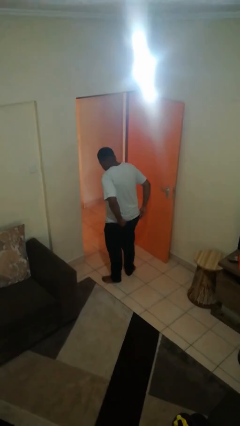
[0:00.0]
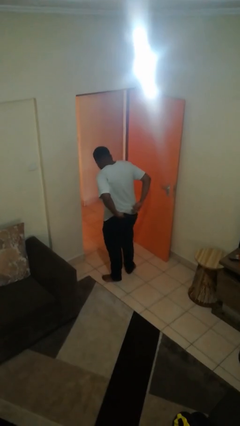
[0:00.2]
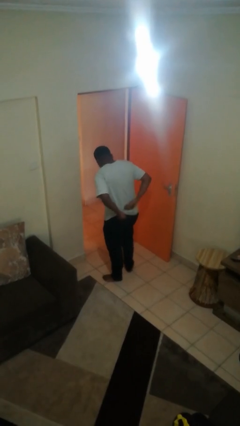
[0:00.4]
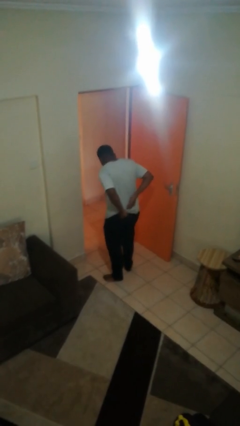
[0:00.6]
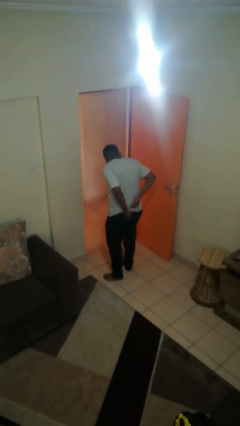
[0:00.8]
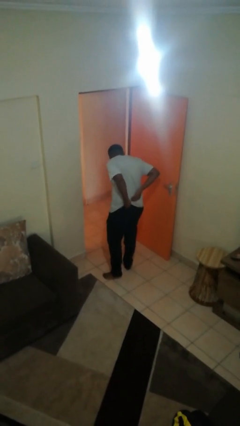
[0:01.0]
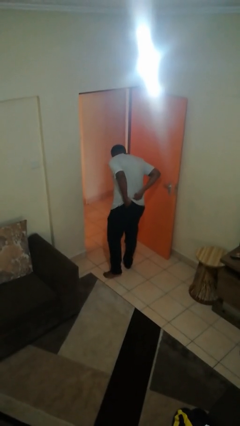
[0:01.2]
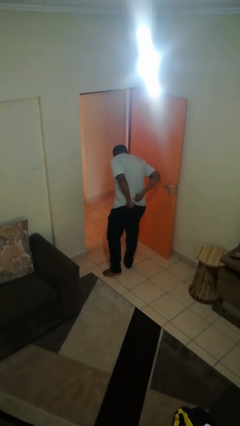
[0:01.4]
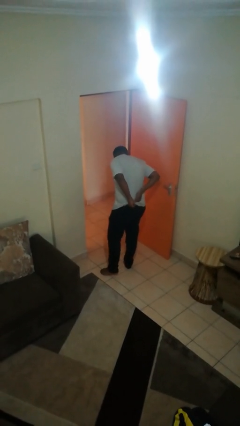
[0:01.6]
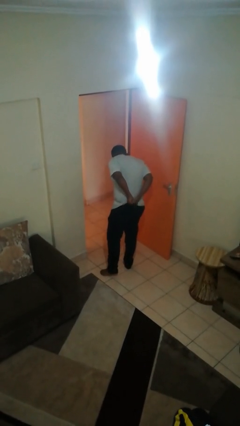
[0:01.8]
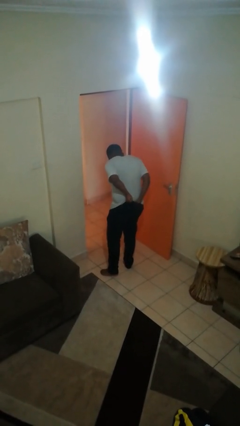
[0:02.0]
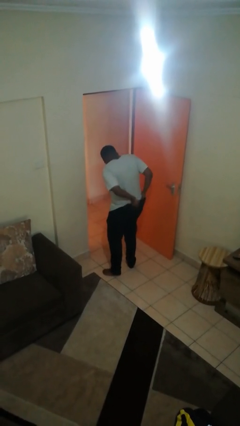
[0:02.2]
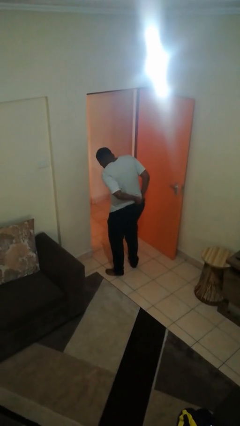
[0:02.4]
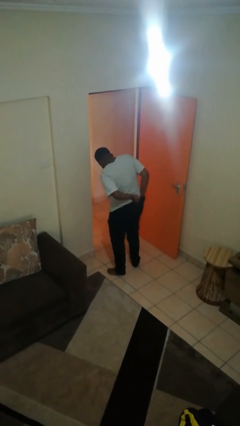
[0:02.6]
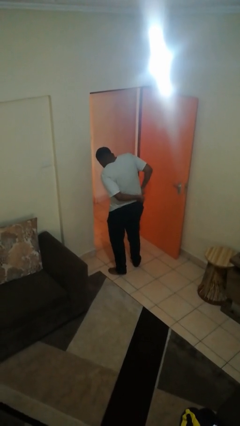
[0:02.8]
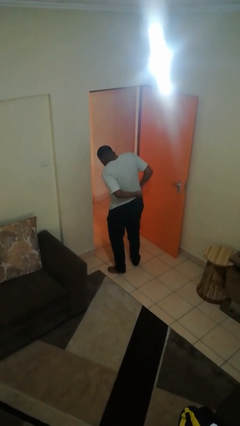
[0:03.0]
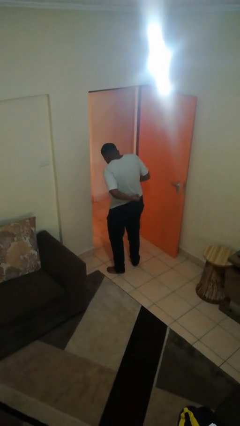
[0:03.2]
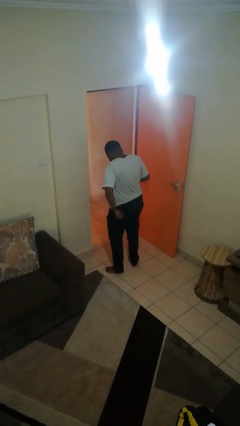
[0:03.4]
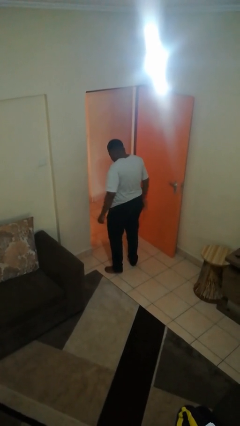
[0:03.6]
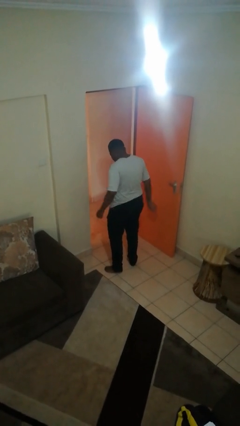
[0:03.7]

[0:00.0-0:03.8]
person tucks in shirt

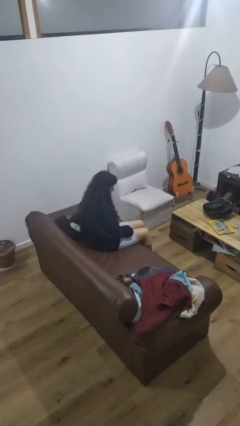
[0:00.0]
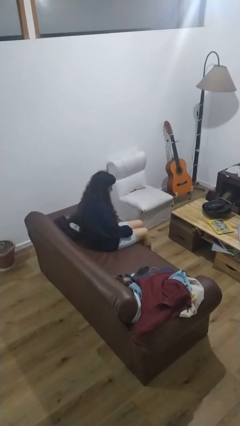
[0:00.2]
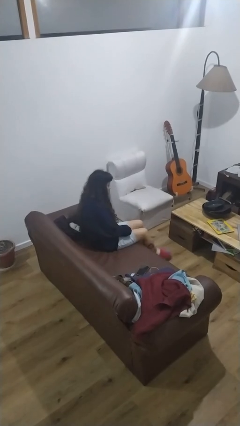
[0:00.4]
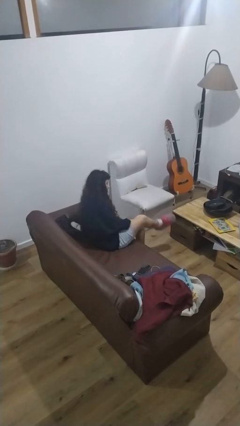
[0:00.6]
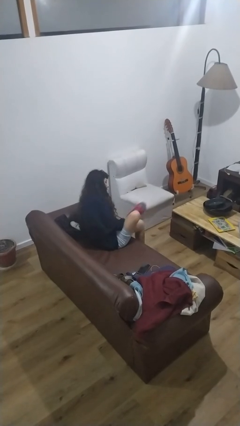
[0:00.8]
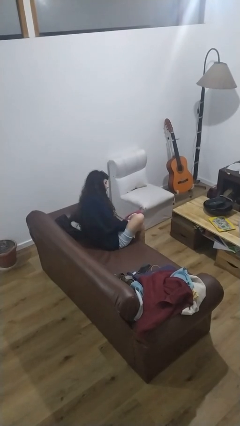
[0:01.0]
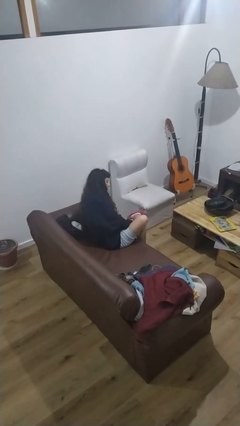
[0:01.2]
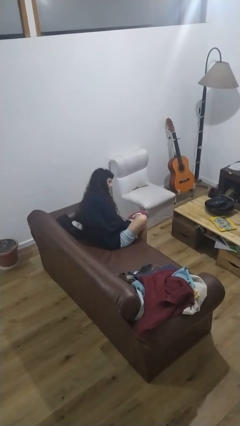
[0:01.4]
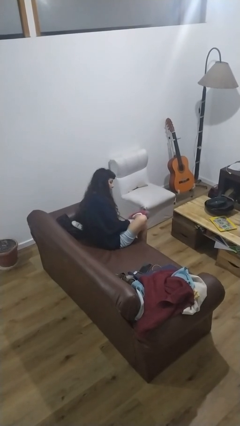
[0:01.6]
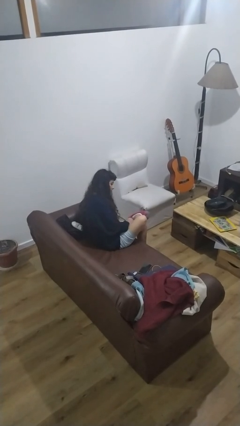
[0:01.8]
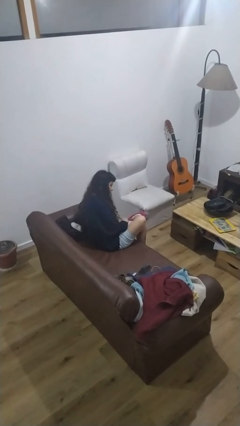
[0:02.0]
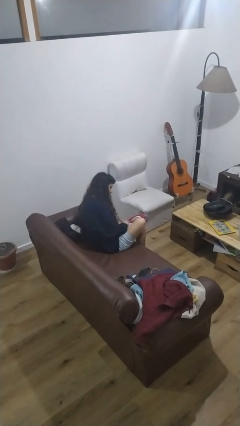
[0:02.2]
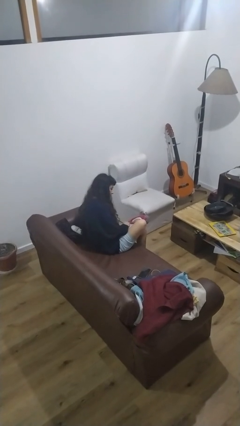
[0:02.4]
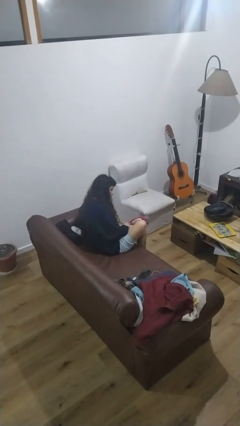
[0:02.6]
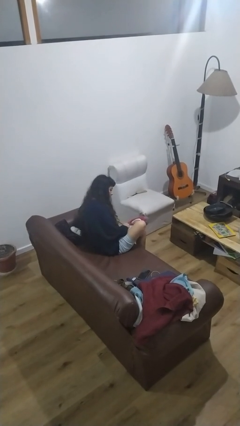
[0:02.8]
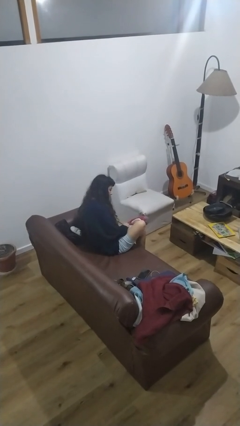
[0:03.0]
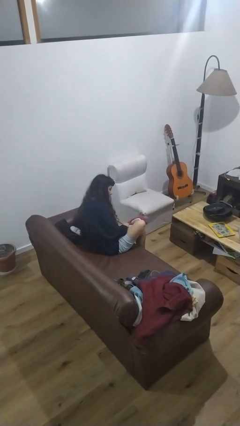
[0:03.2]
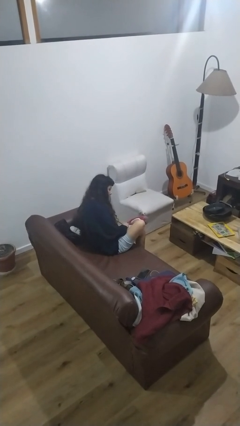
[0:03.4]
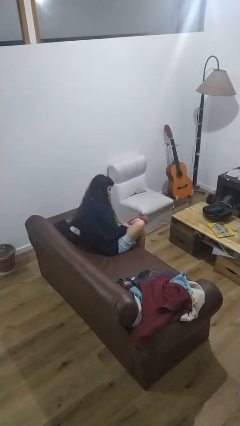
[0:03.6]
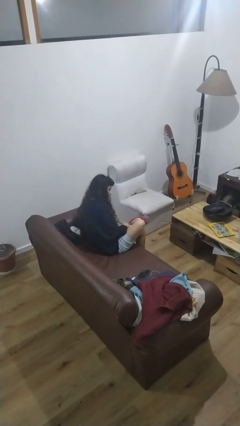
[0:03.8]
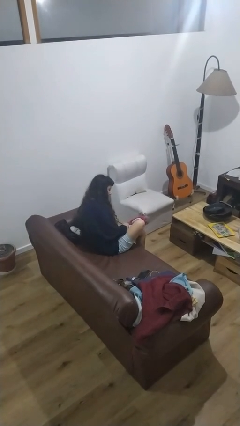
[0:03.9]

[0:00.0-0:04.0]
person crosses legs

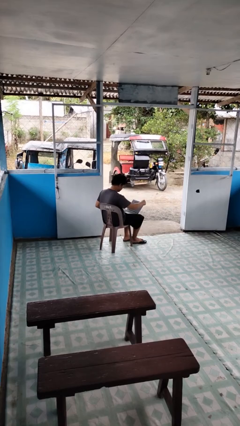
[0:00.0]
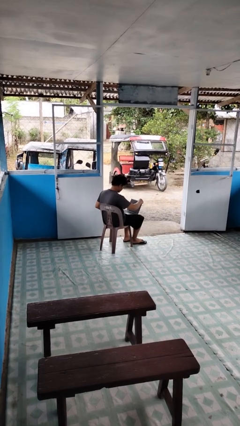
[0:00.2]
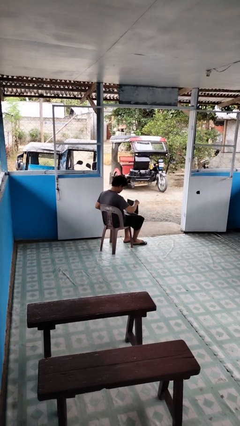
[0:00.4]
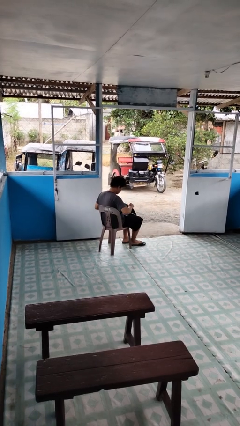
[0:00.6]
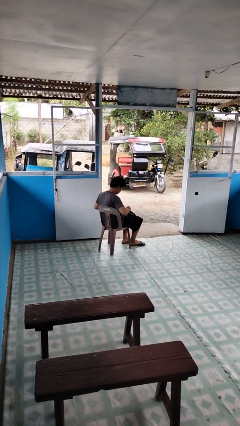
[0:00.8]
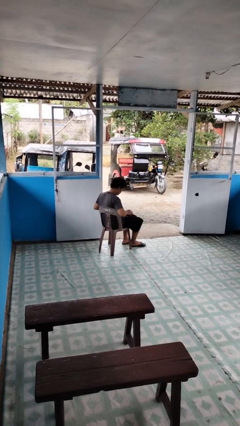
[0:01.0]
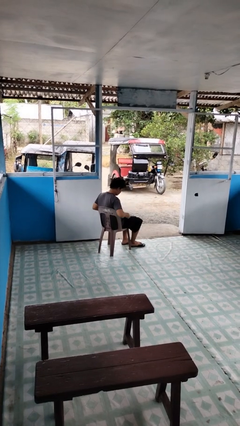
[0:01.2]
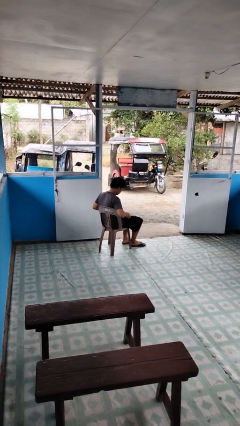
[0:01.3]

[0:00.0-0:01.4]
person closes laptop

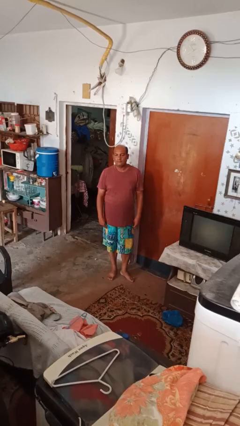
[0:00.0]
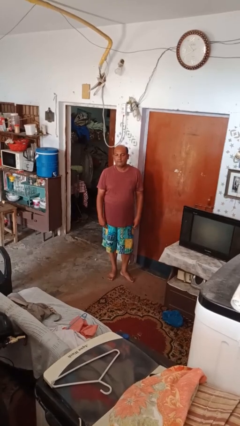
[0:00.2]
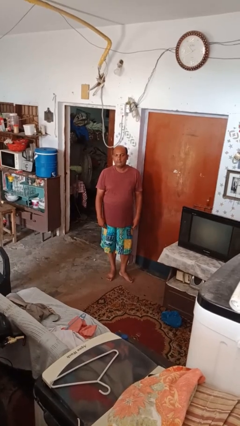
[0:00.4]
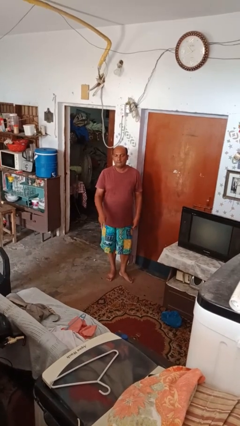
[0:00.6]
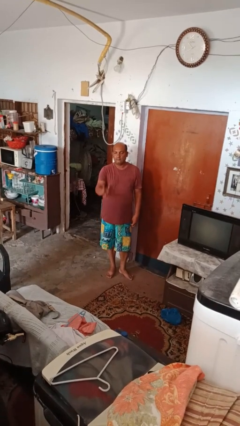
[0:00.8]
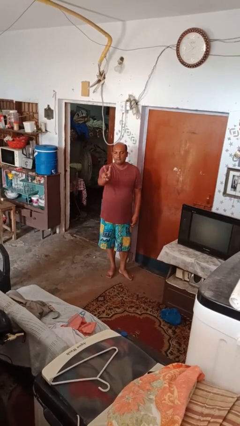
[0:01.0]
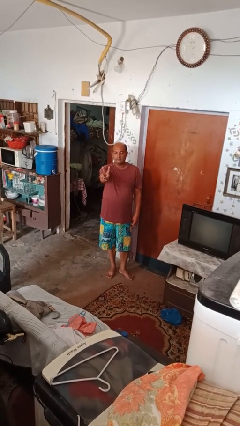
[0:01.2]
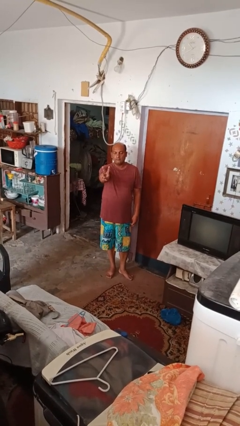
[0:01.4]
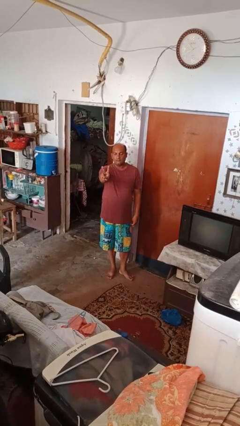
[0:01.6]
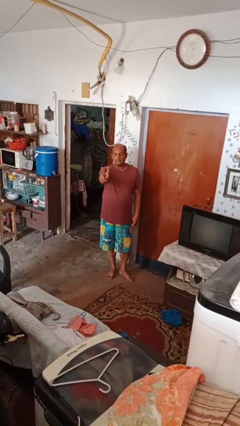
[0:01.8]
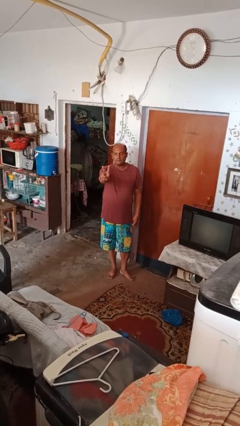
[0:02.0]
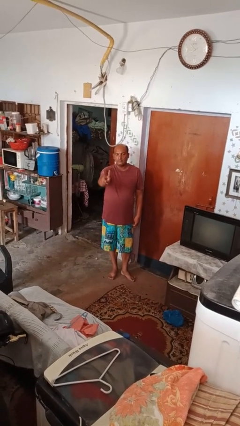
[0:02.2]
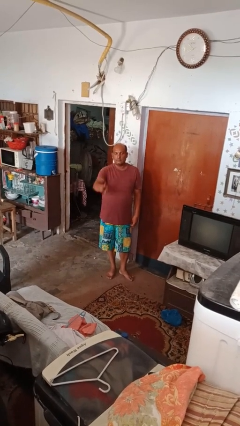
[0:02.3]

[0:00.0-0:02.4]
person gestures peace

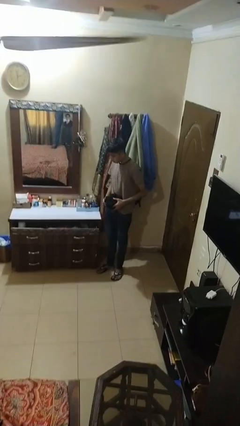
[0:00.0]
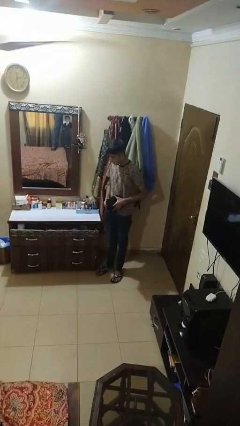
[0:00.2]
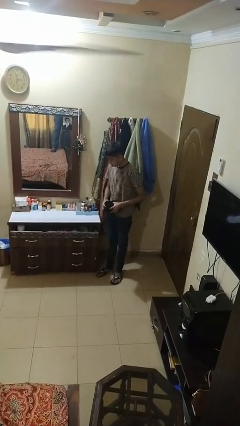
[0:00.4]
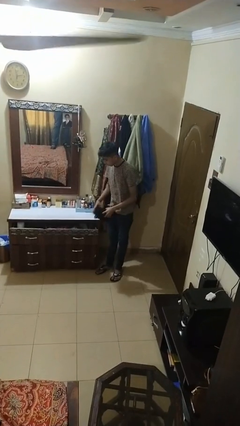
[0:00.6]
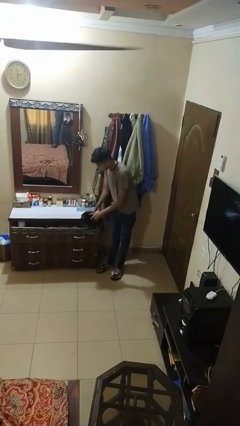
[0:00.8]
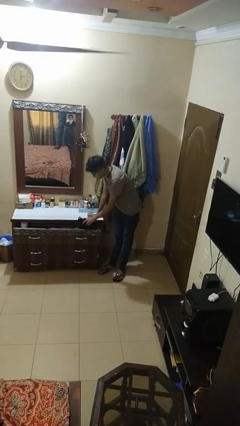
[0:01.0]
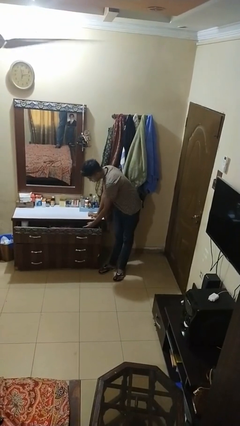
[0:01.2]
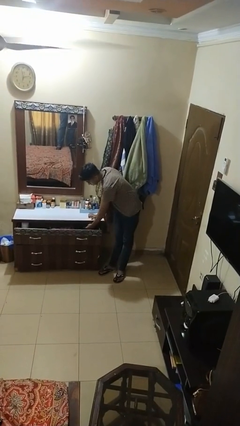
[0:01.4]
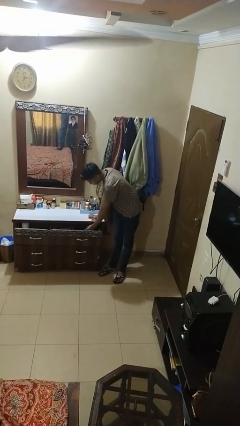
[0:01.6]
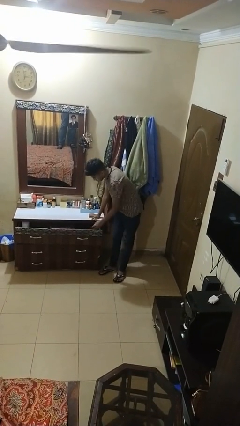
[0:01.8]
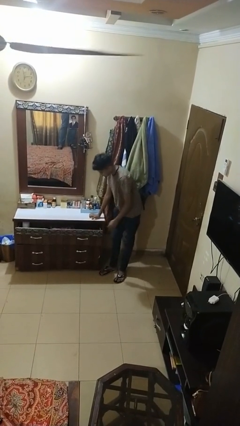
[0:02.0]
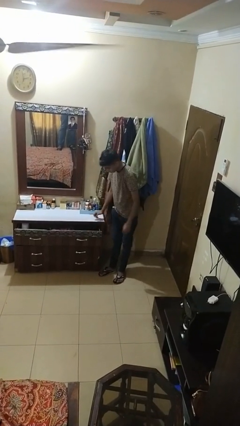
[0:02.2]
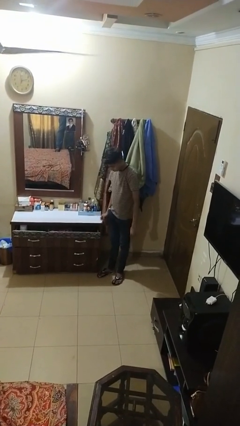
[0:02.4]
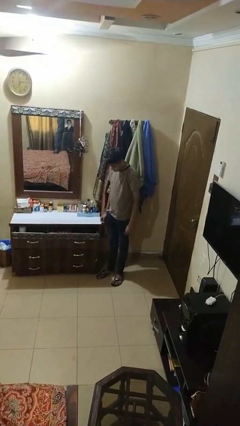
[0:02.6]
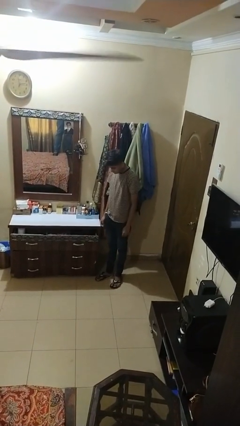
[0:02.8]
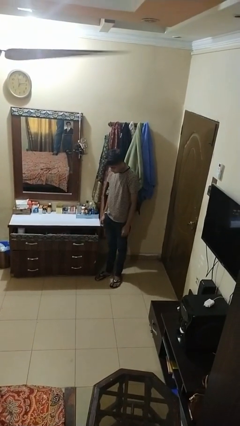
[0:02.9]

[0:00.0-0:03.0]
person puts clothes into dresser

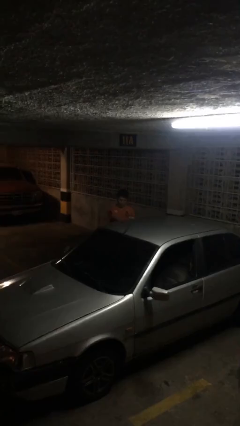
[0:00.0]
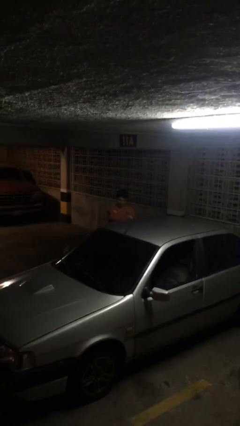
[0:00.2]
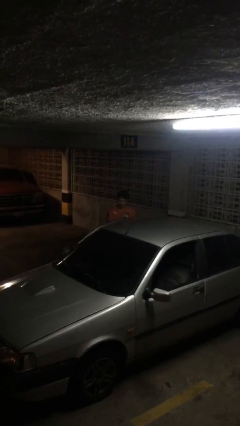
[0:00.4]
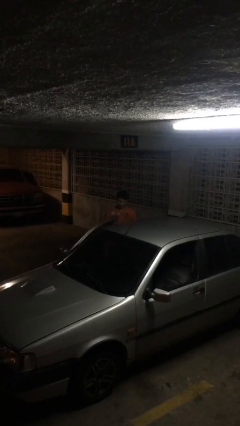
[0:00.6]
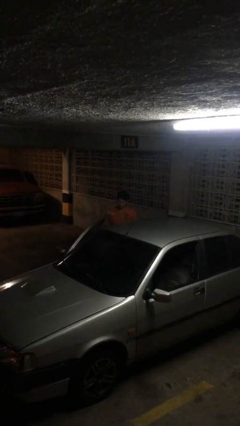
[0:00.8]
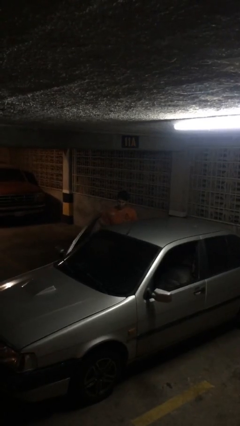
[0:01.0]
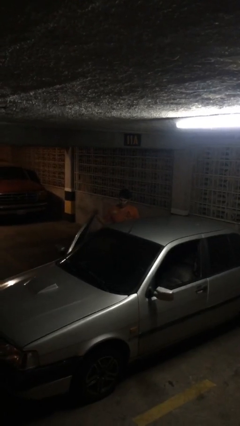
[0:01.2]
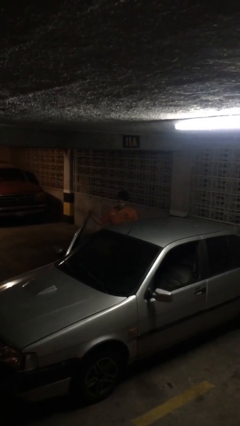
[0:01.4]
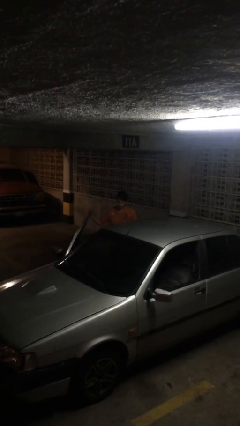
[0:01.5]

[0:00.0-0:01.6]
person opens car door

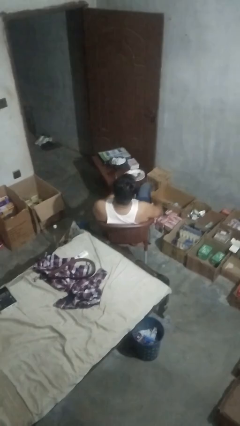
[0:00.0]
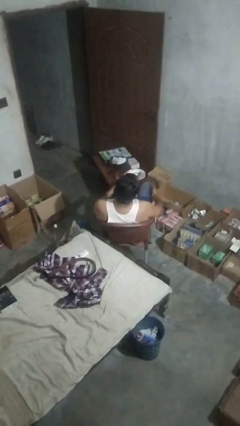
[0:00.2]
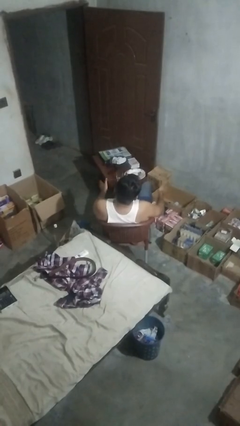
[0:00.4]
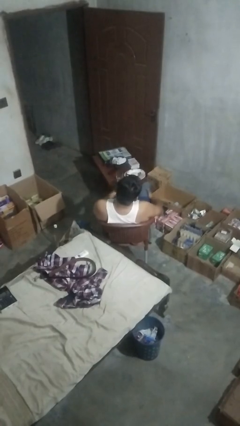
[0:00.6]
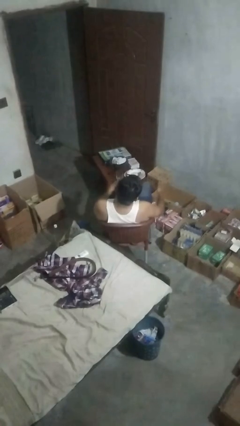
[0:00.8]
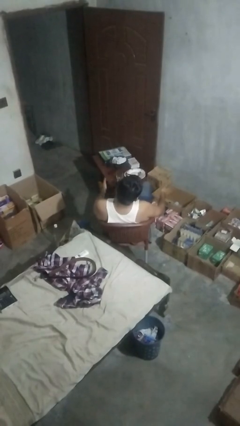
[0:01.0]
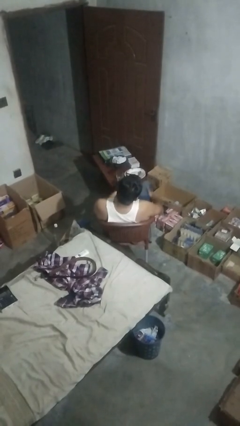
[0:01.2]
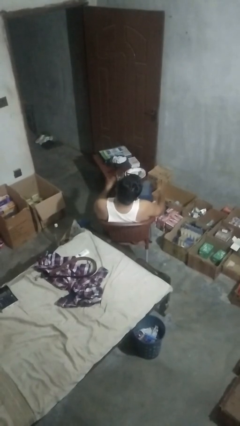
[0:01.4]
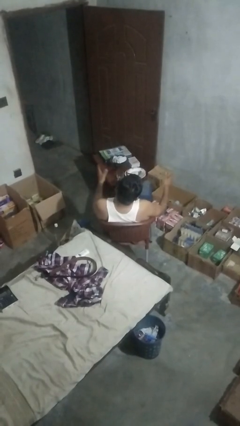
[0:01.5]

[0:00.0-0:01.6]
person slaps hands on thighs
